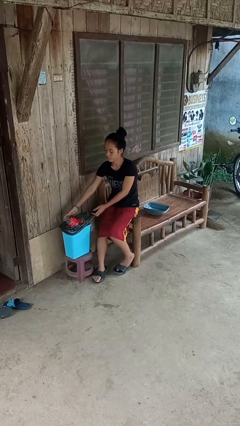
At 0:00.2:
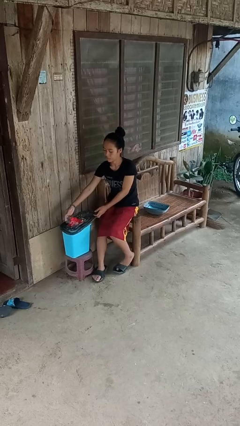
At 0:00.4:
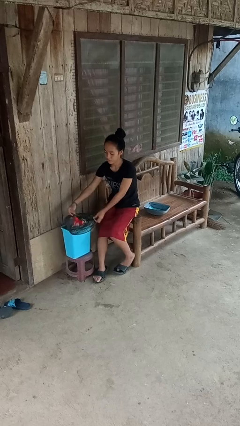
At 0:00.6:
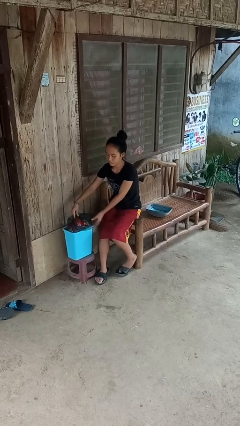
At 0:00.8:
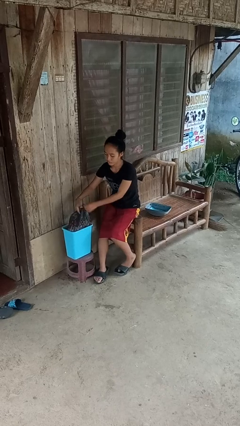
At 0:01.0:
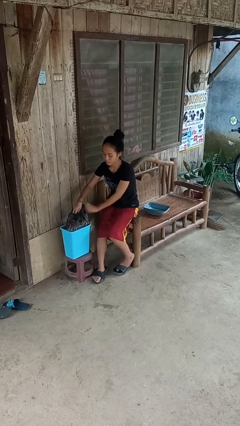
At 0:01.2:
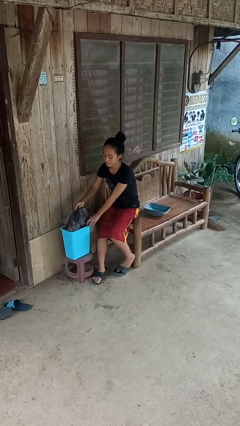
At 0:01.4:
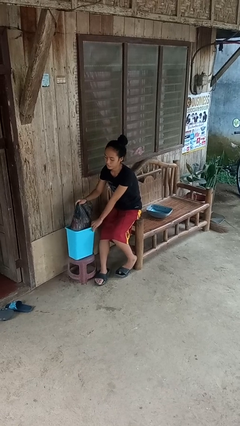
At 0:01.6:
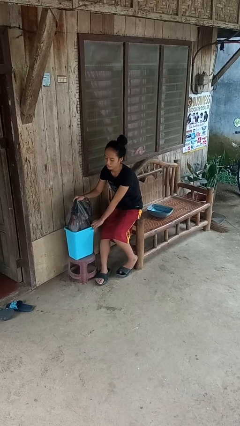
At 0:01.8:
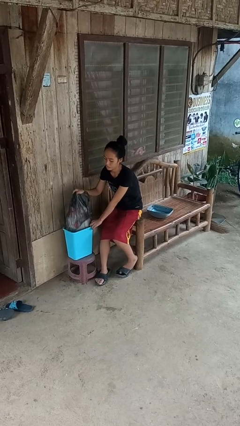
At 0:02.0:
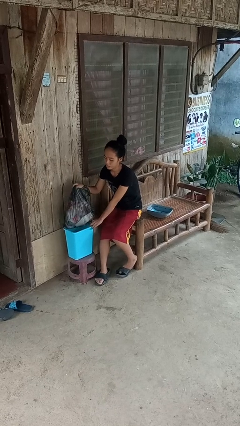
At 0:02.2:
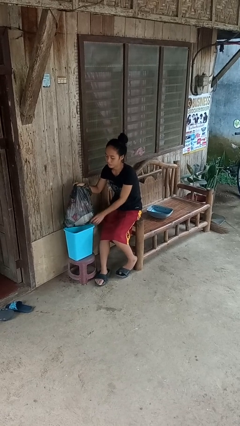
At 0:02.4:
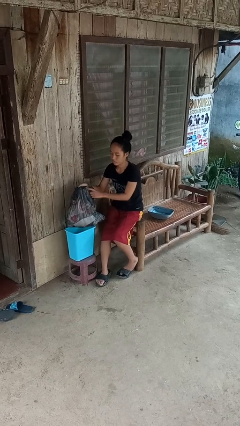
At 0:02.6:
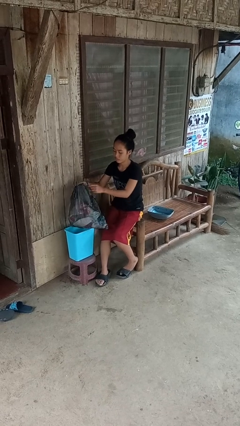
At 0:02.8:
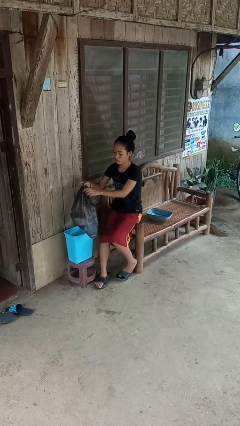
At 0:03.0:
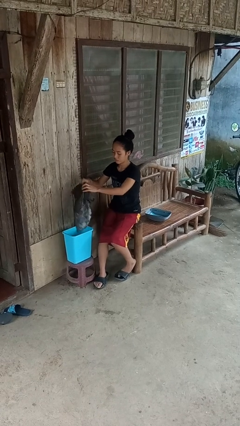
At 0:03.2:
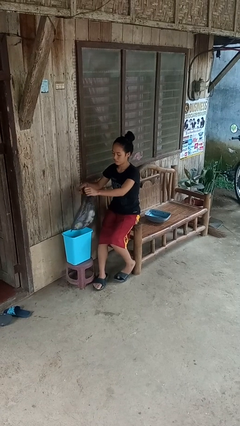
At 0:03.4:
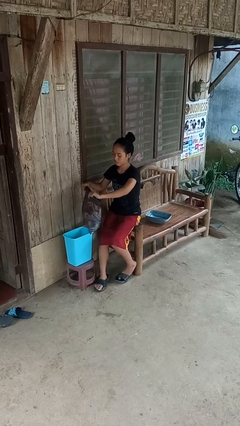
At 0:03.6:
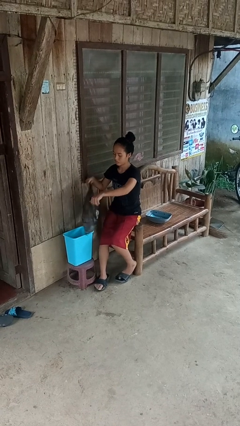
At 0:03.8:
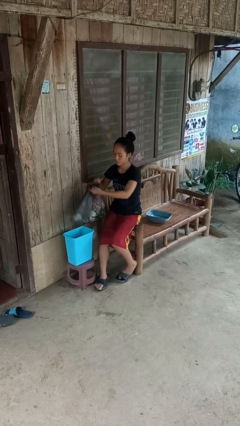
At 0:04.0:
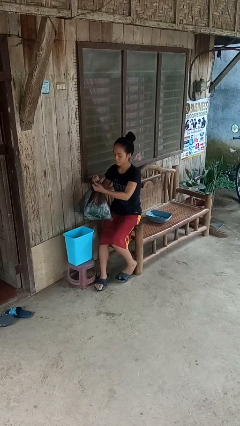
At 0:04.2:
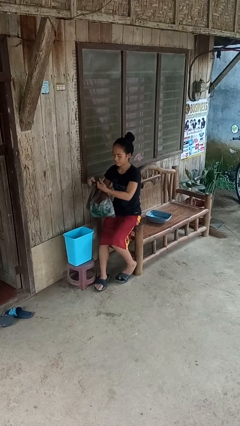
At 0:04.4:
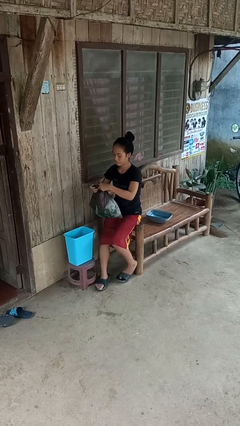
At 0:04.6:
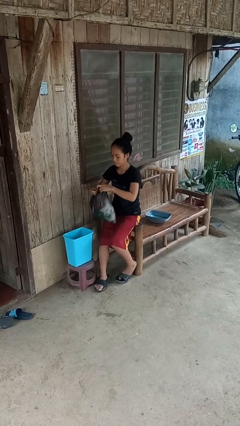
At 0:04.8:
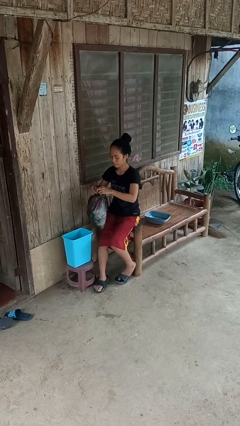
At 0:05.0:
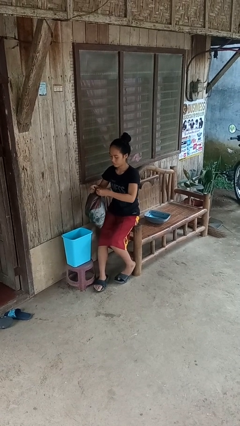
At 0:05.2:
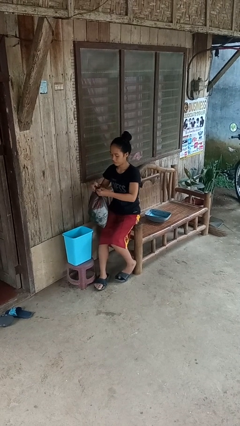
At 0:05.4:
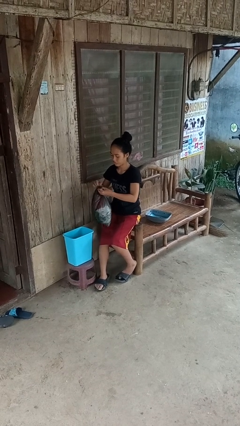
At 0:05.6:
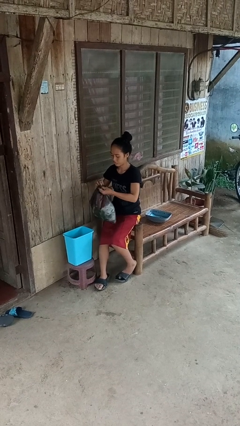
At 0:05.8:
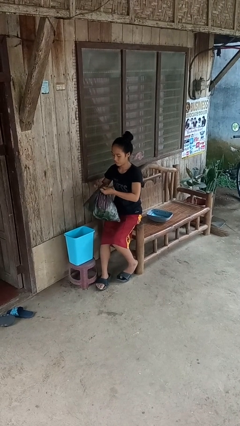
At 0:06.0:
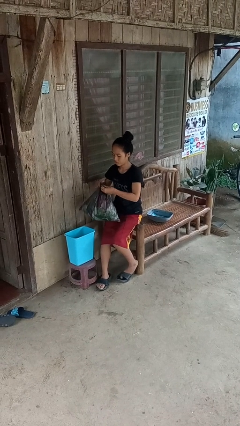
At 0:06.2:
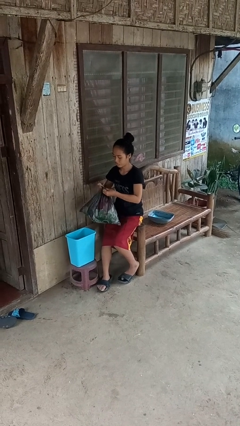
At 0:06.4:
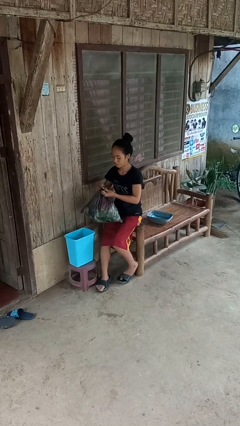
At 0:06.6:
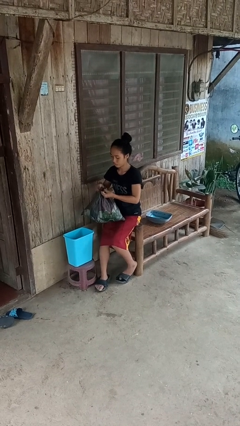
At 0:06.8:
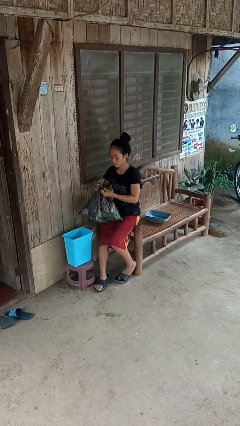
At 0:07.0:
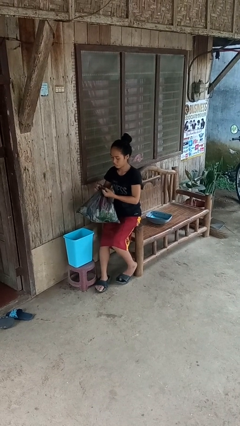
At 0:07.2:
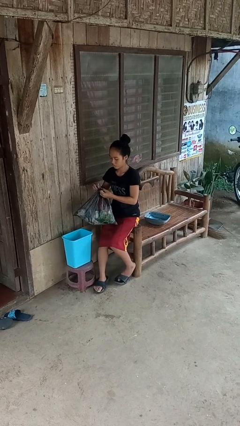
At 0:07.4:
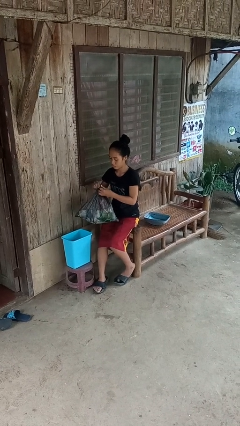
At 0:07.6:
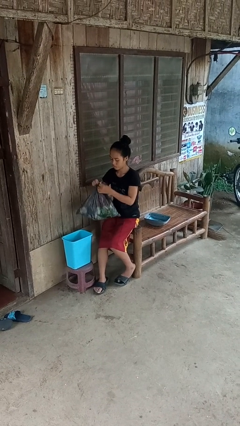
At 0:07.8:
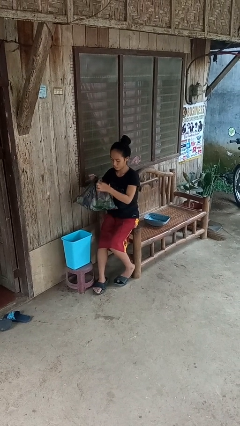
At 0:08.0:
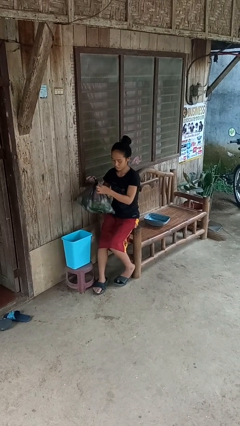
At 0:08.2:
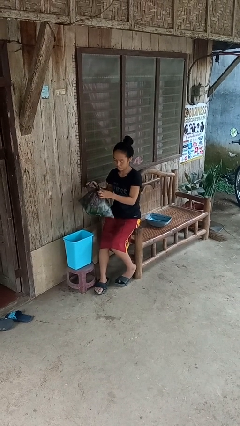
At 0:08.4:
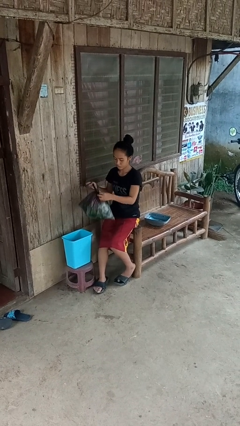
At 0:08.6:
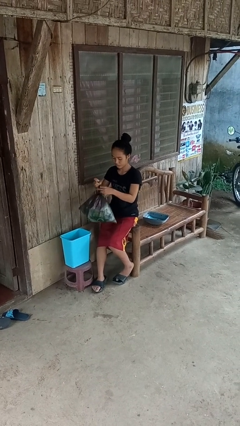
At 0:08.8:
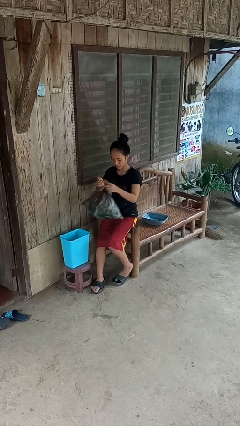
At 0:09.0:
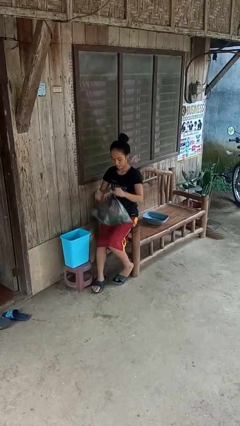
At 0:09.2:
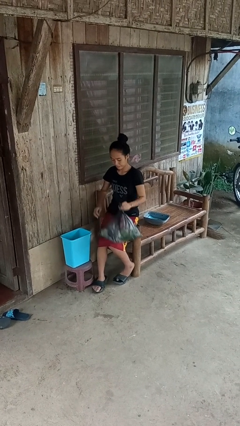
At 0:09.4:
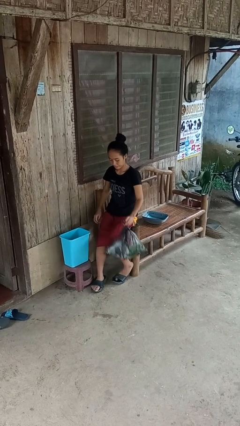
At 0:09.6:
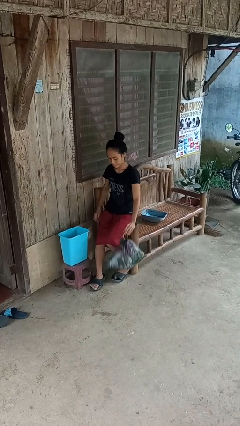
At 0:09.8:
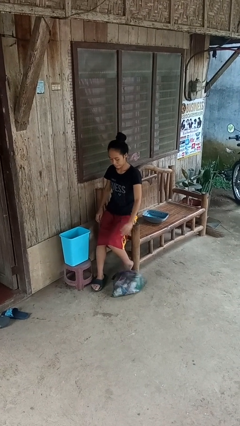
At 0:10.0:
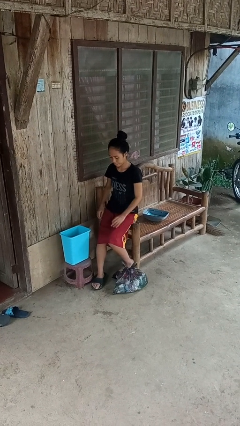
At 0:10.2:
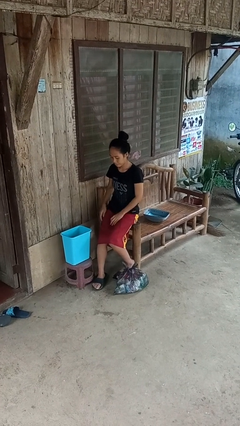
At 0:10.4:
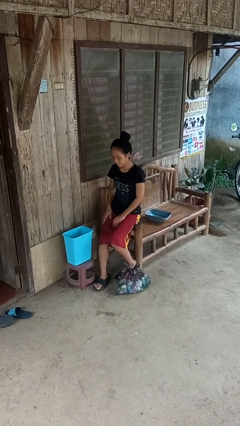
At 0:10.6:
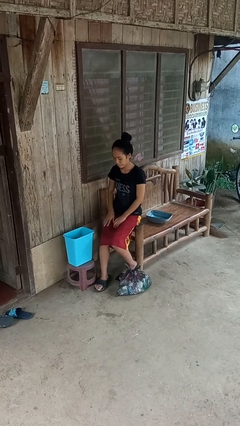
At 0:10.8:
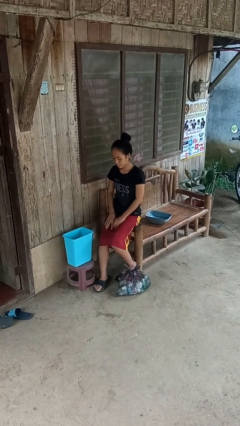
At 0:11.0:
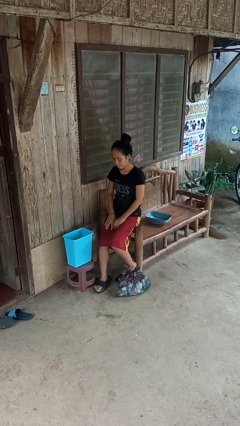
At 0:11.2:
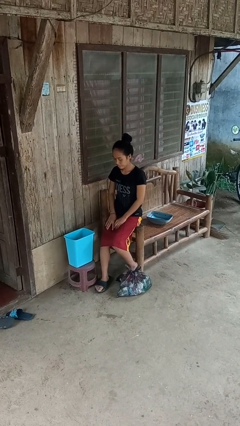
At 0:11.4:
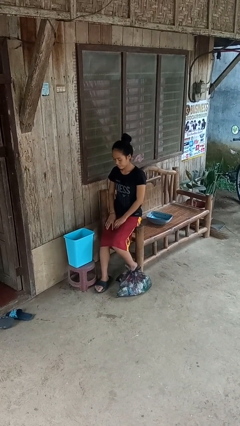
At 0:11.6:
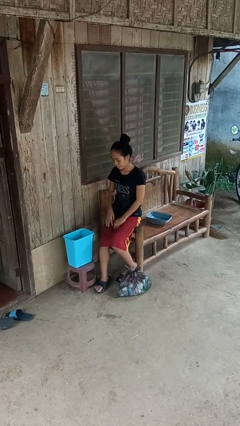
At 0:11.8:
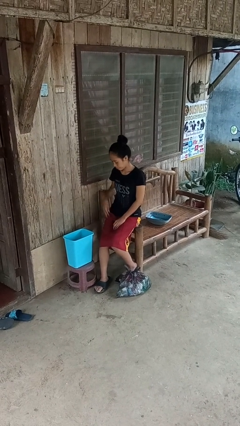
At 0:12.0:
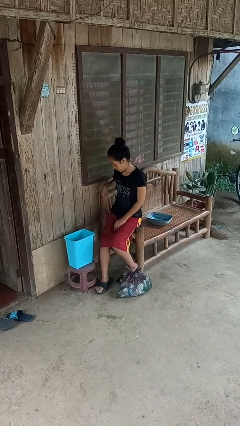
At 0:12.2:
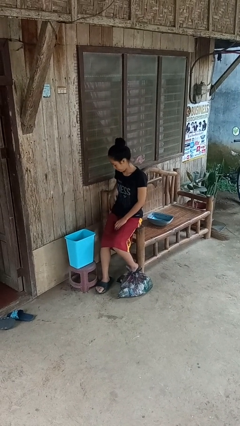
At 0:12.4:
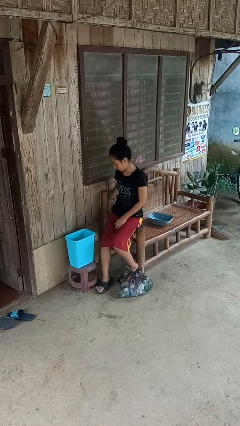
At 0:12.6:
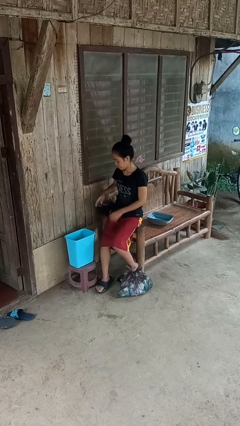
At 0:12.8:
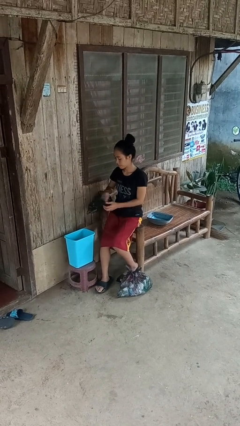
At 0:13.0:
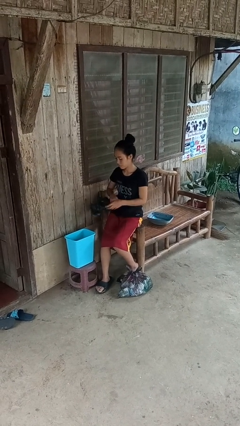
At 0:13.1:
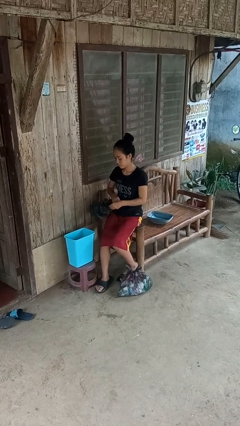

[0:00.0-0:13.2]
person removes trashbag from trashcan

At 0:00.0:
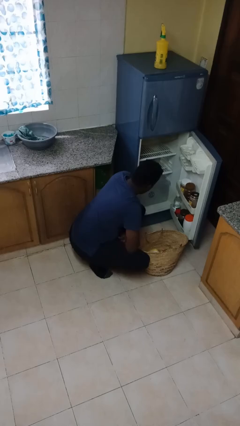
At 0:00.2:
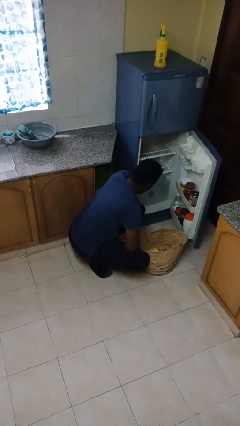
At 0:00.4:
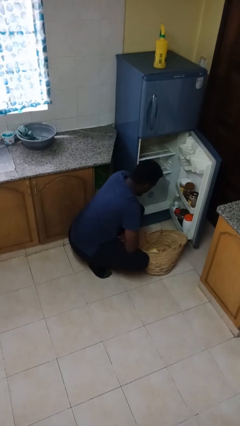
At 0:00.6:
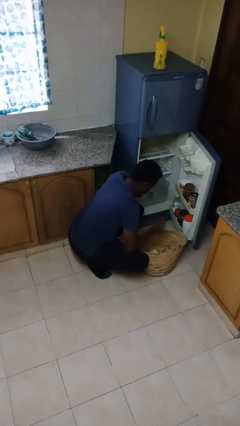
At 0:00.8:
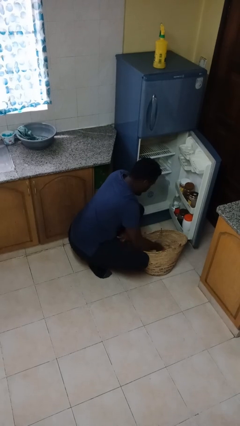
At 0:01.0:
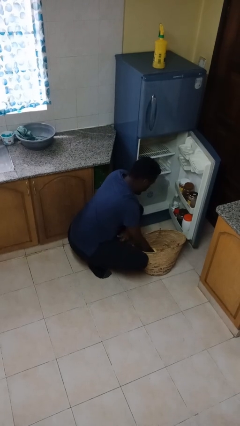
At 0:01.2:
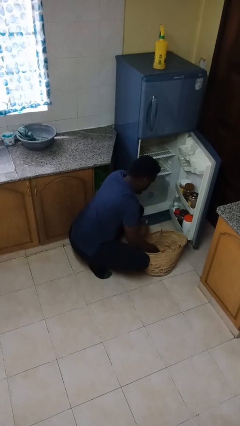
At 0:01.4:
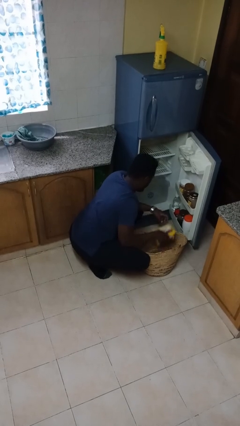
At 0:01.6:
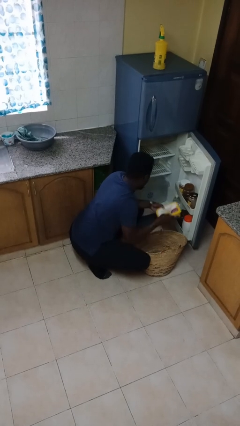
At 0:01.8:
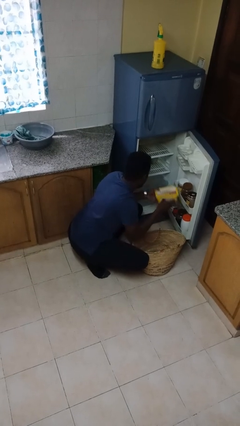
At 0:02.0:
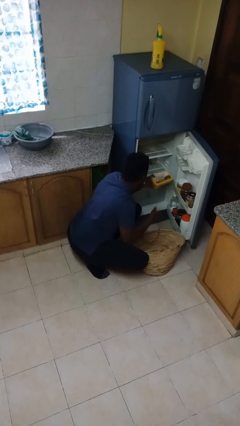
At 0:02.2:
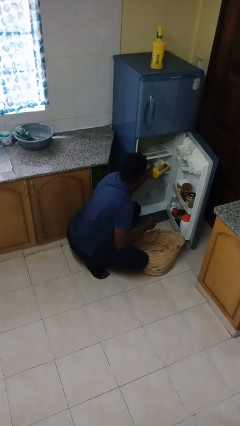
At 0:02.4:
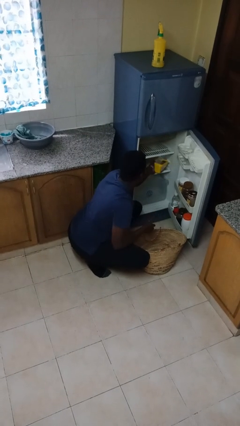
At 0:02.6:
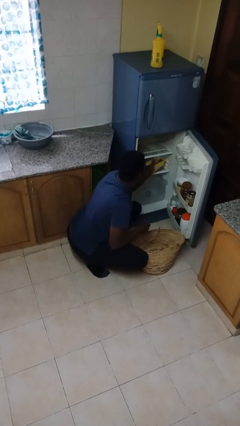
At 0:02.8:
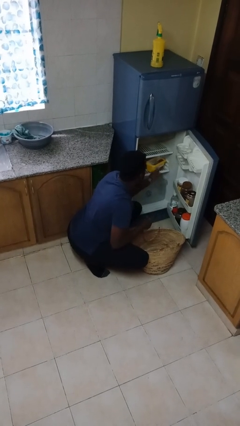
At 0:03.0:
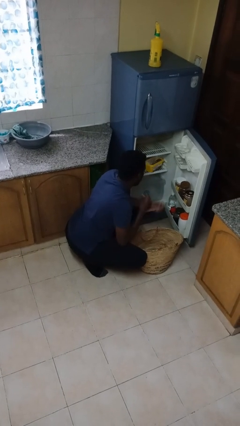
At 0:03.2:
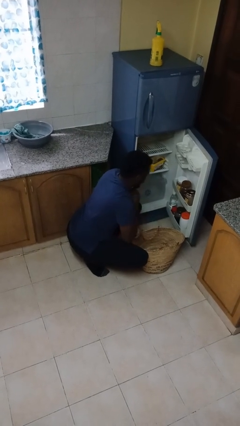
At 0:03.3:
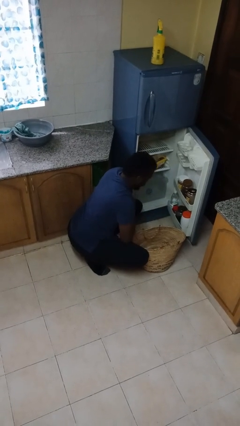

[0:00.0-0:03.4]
person loads groceries into refrigerator

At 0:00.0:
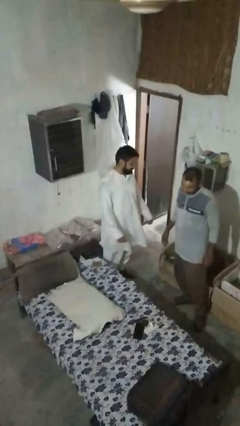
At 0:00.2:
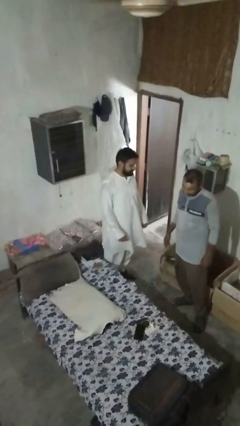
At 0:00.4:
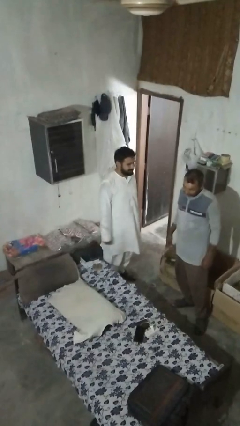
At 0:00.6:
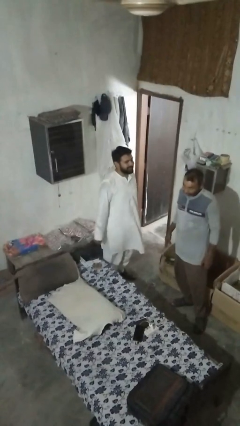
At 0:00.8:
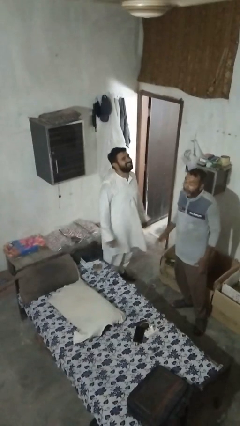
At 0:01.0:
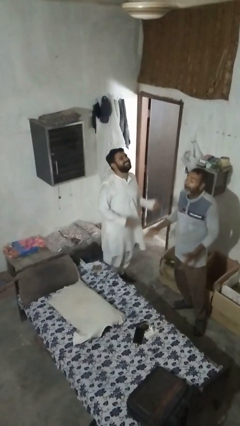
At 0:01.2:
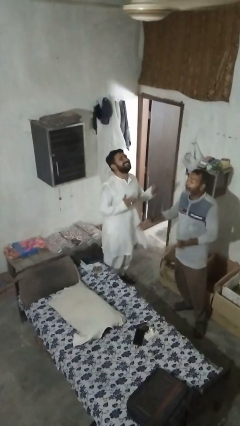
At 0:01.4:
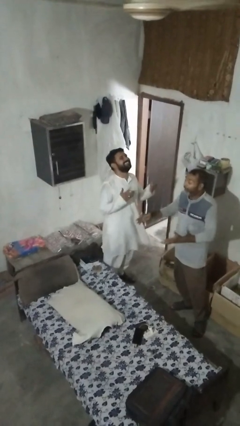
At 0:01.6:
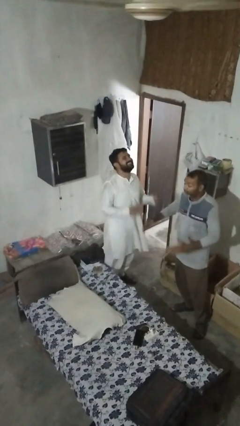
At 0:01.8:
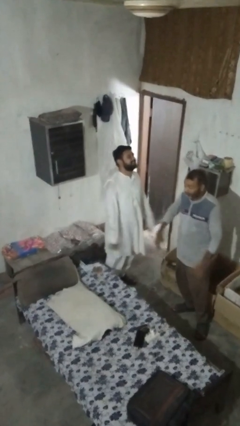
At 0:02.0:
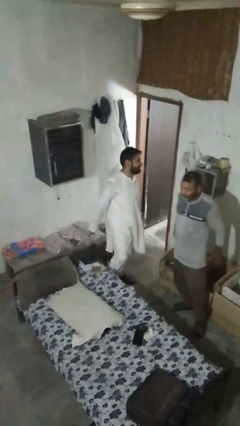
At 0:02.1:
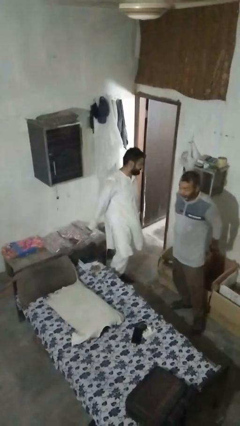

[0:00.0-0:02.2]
person laughs with person
